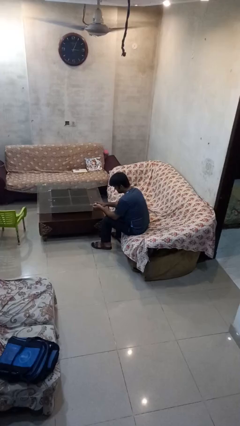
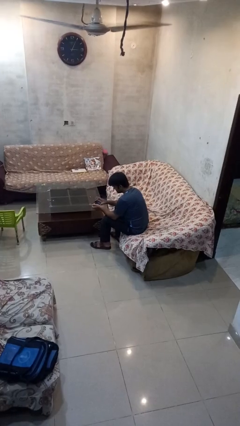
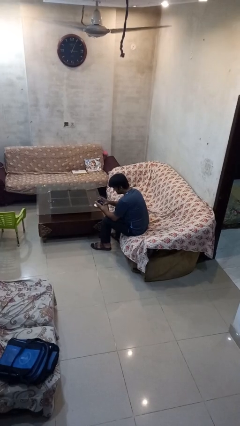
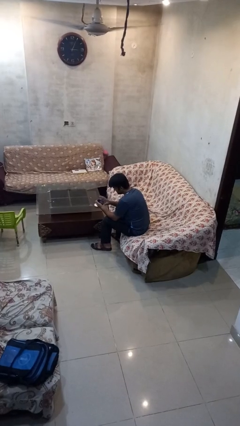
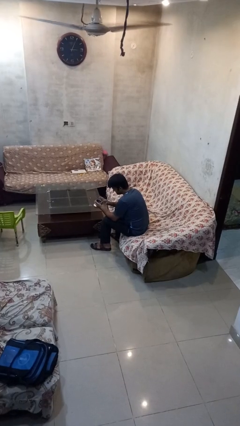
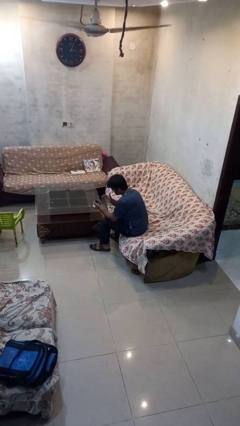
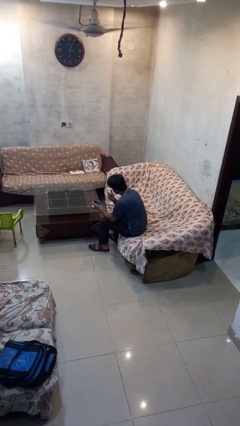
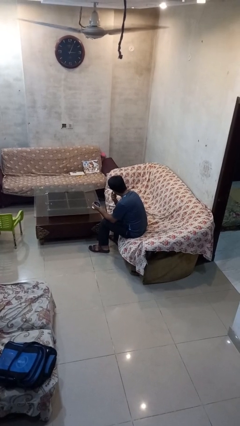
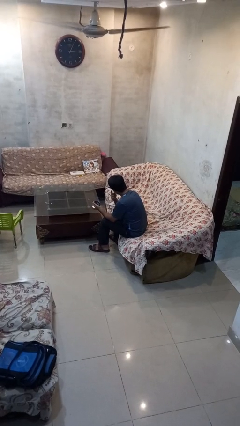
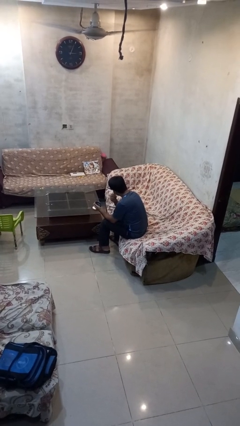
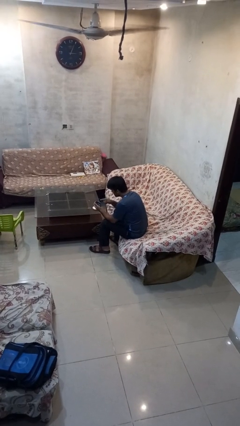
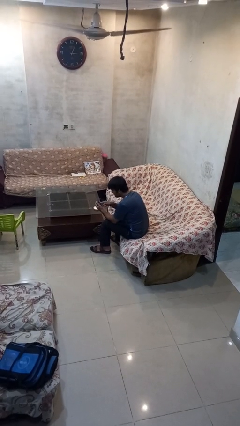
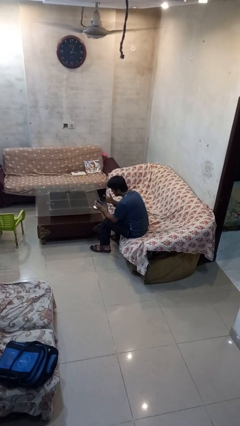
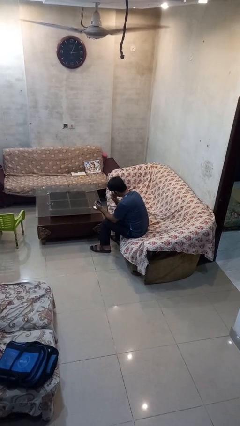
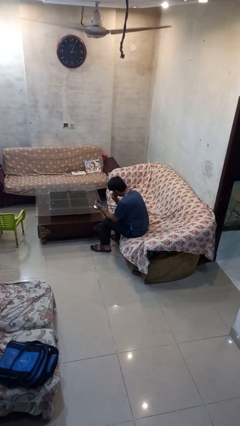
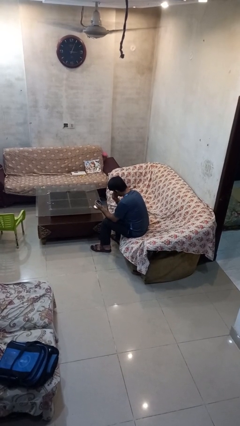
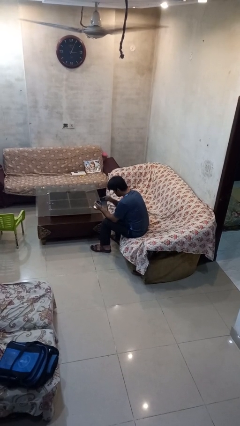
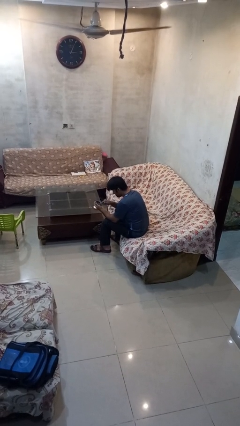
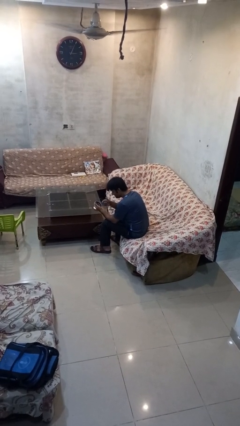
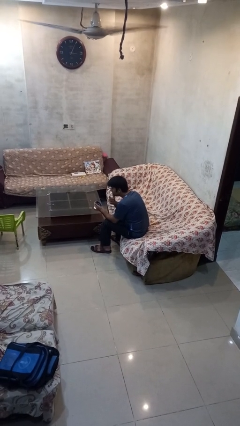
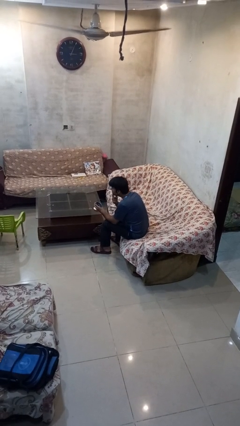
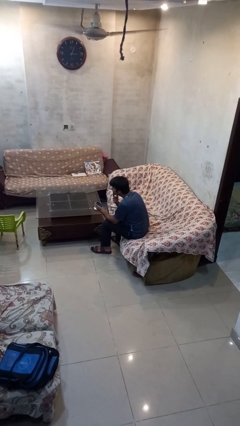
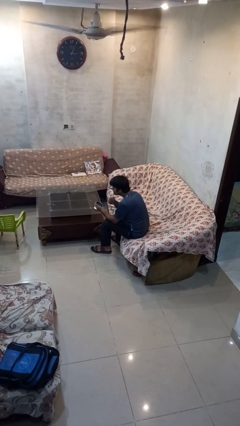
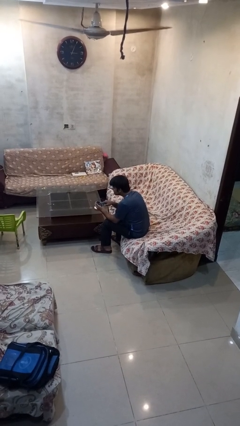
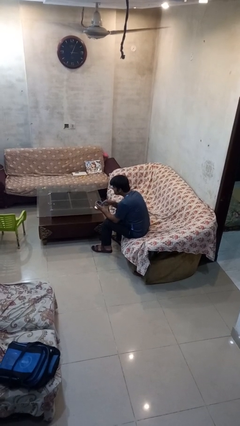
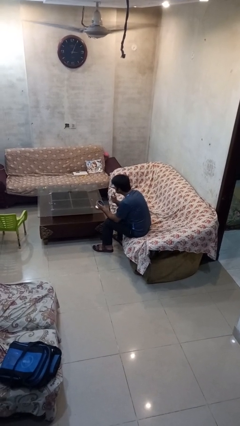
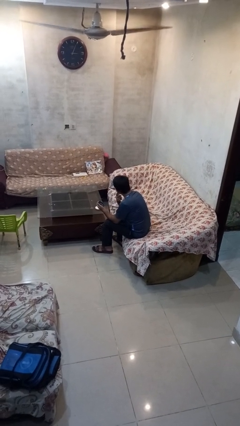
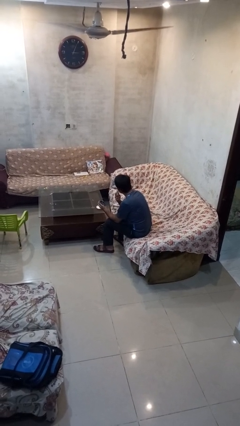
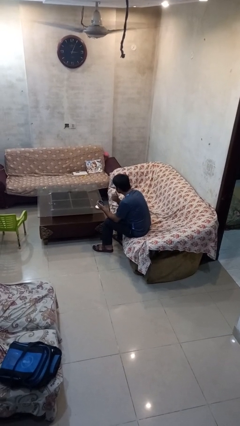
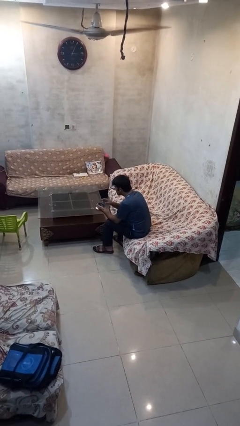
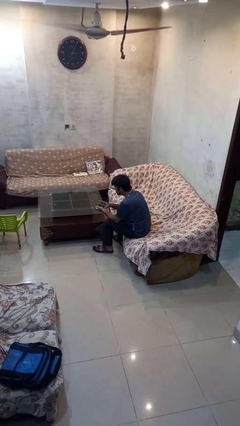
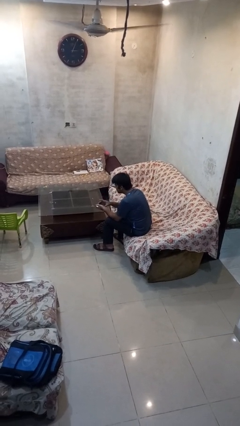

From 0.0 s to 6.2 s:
person applies facial moisturizer

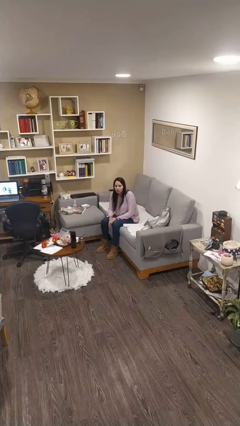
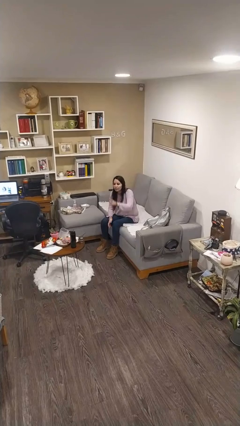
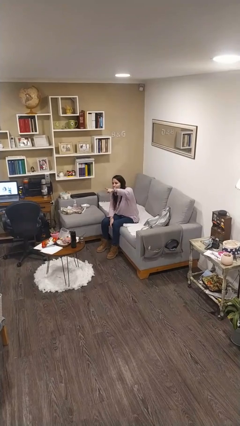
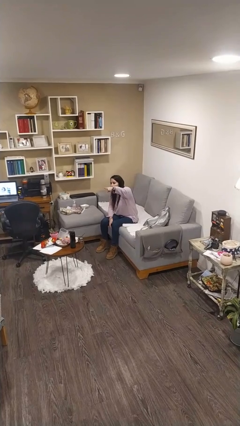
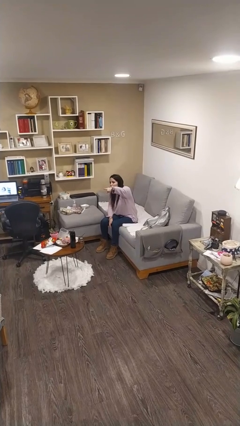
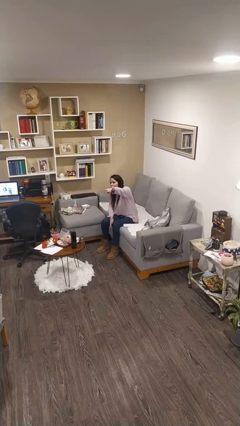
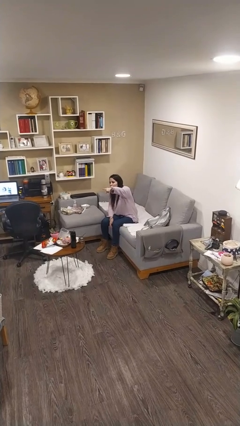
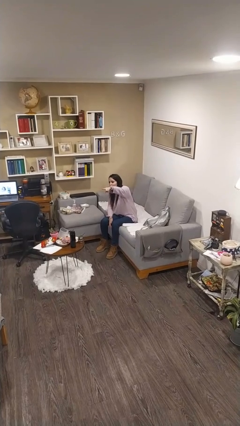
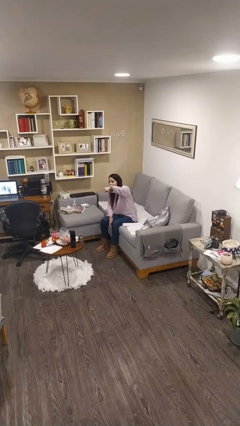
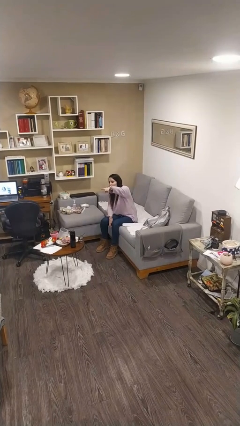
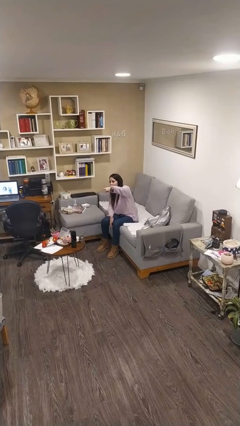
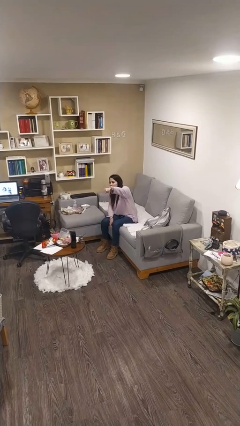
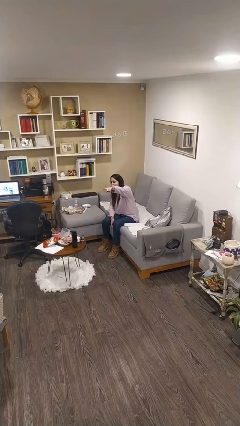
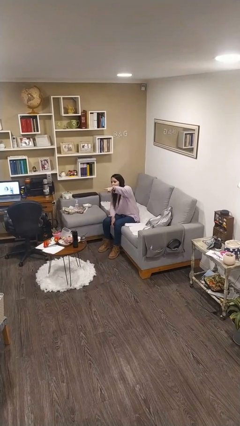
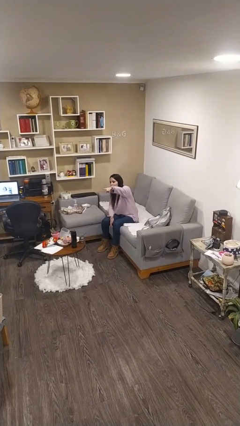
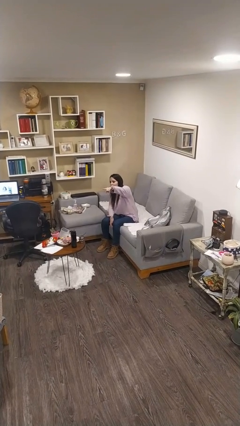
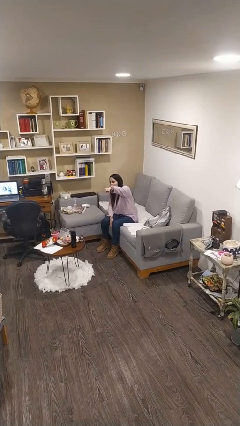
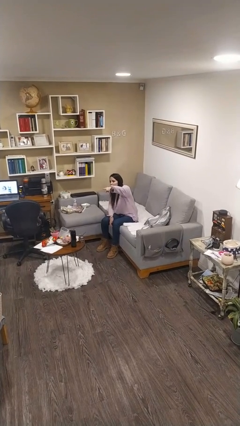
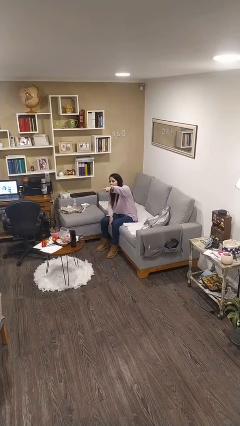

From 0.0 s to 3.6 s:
person points at person

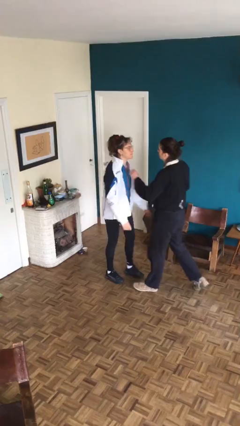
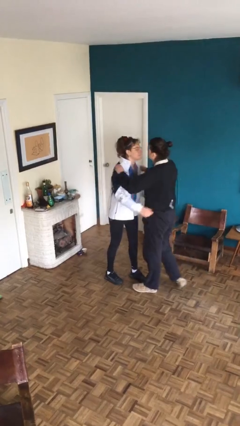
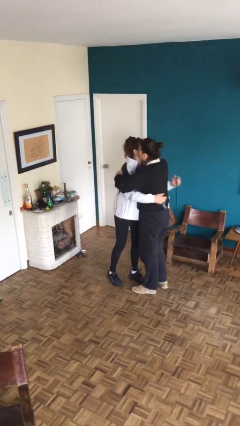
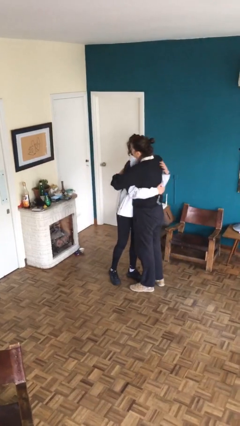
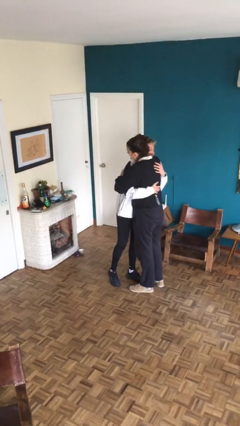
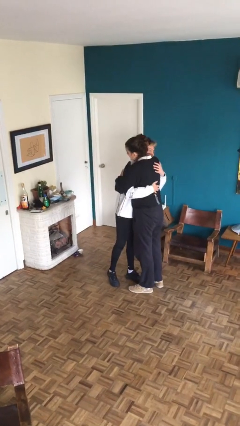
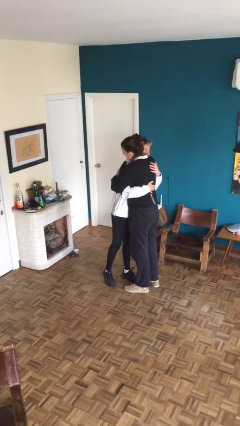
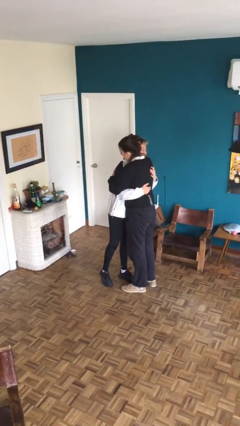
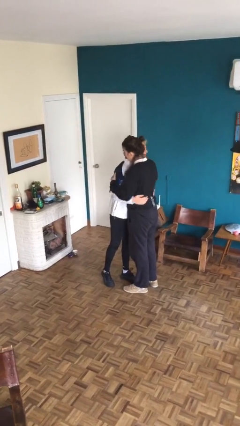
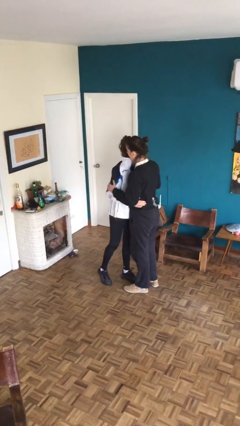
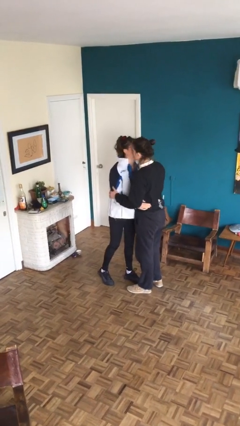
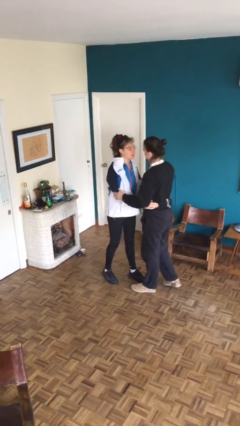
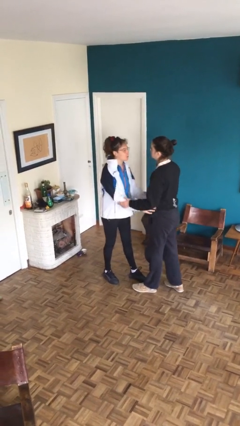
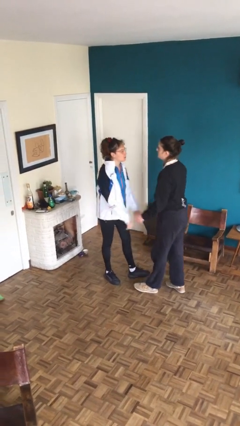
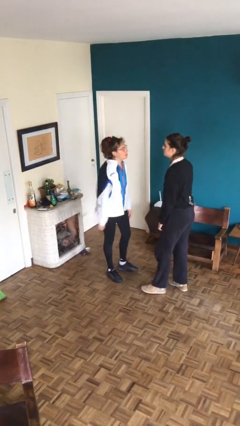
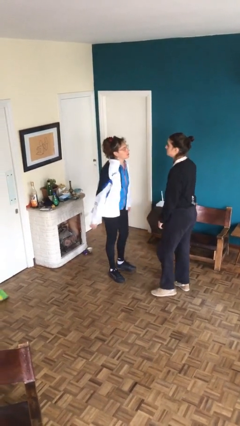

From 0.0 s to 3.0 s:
person embraces person

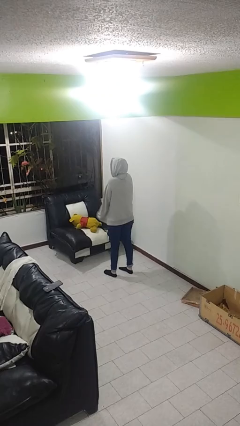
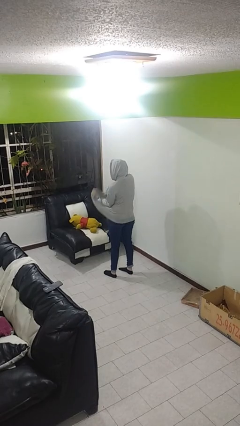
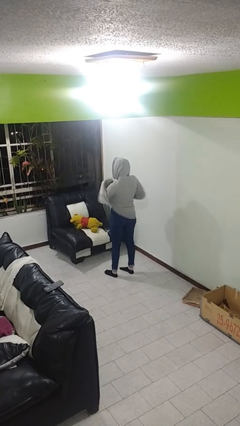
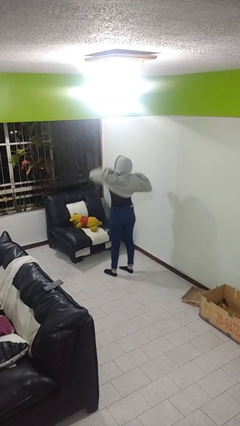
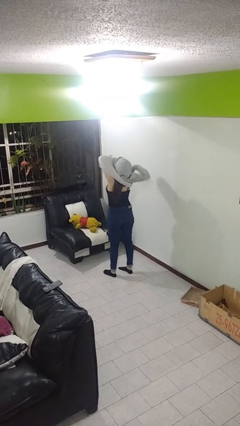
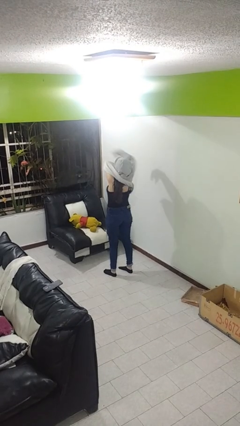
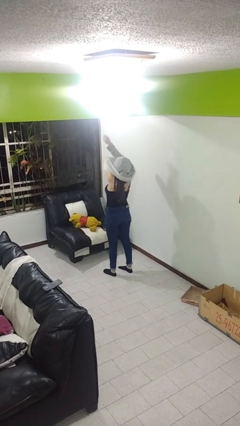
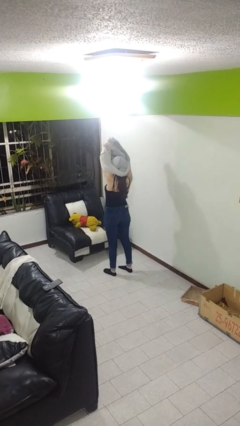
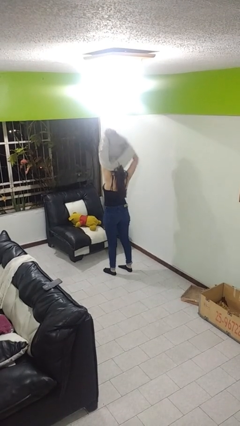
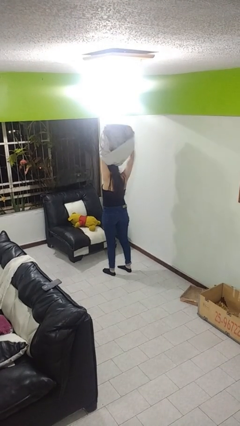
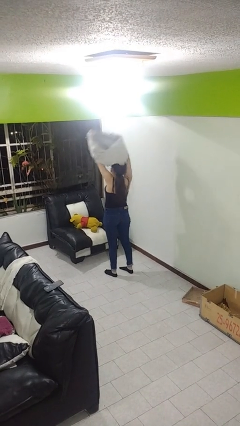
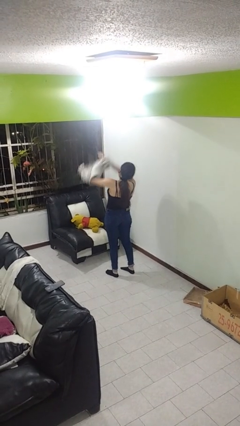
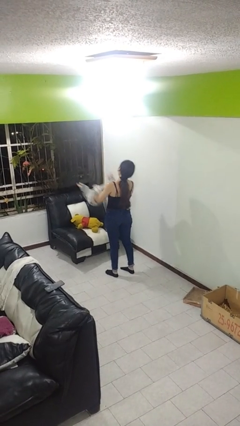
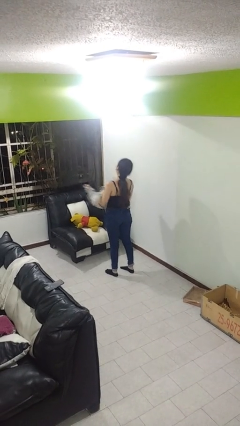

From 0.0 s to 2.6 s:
person takes off hoodie

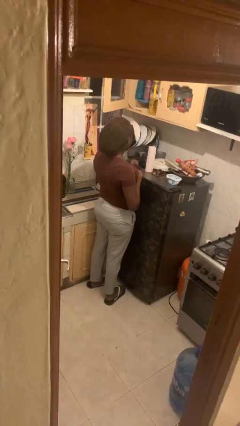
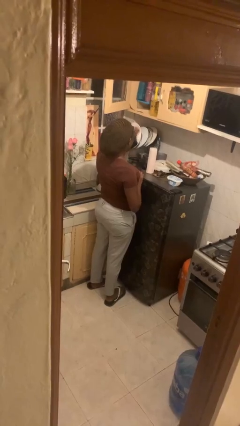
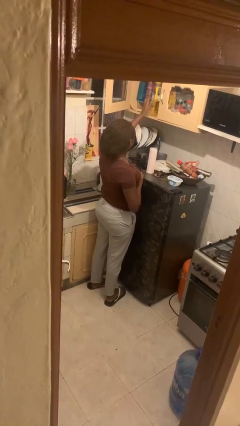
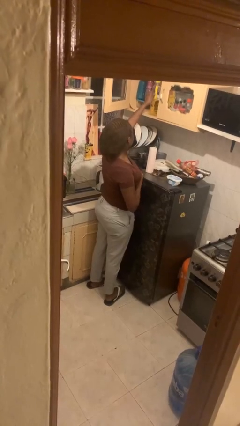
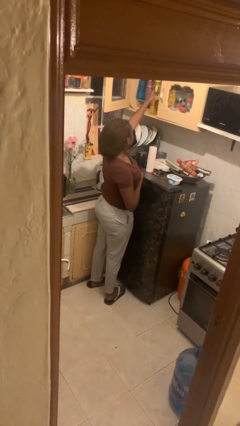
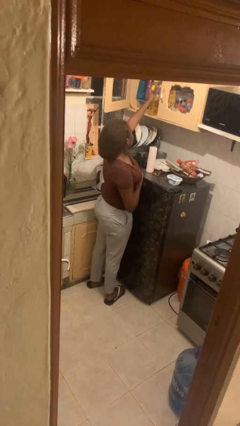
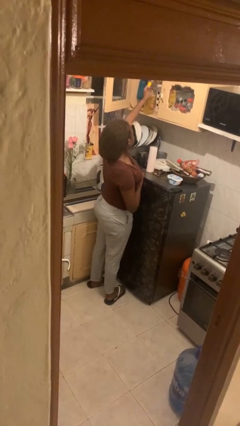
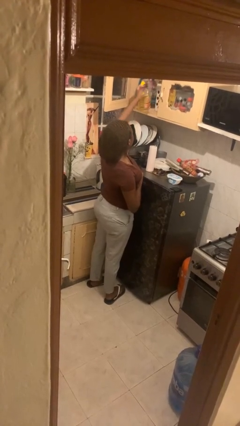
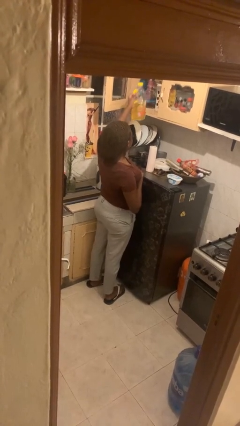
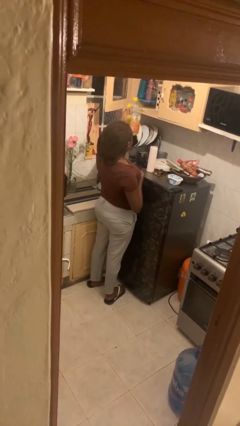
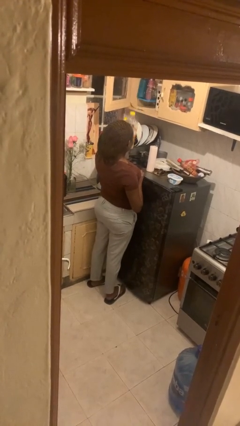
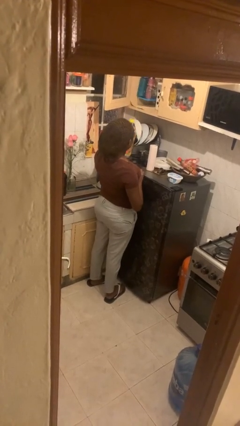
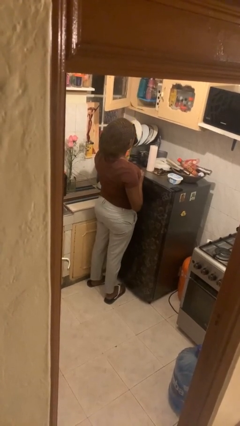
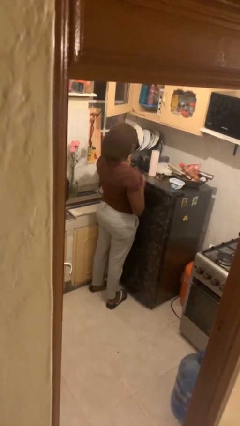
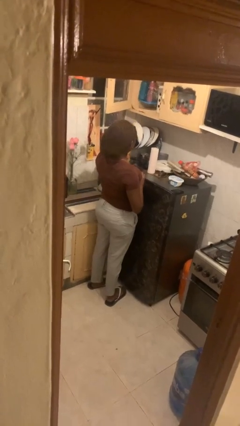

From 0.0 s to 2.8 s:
person picks up object from cabinet
